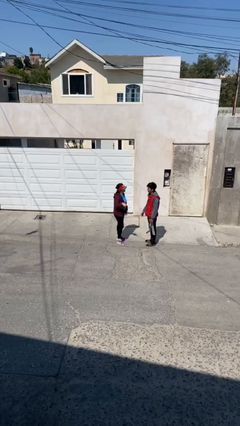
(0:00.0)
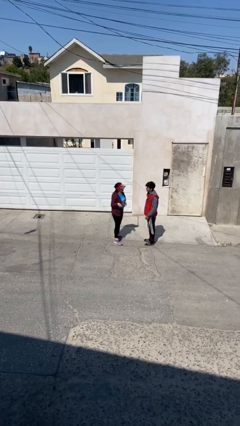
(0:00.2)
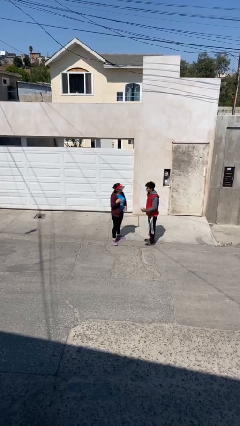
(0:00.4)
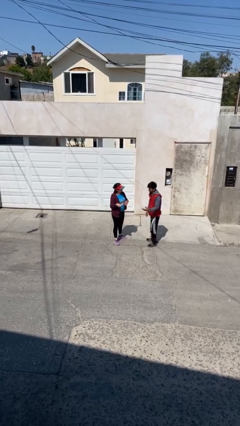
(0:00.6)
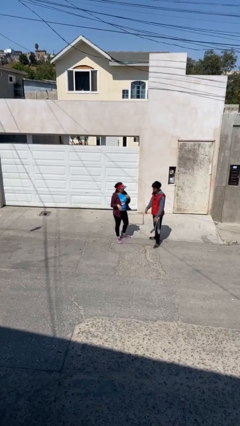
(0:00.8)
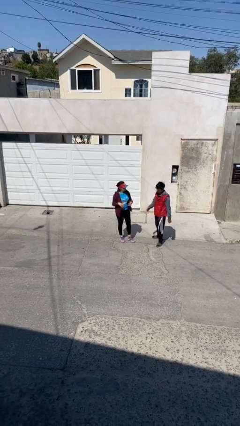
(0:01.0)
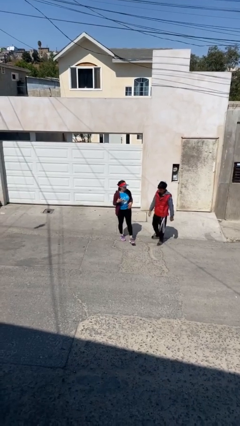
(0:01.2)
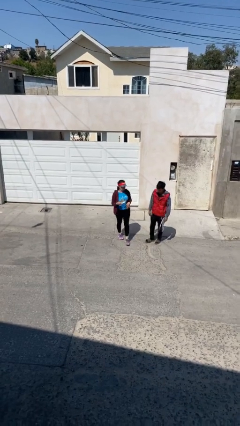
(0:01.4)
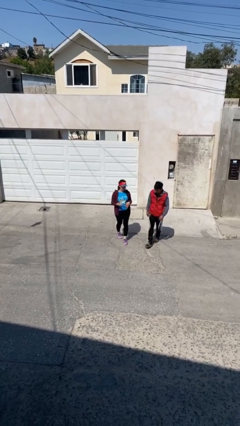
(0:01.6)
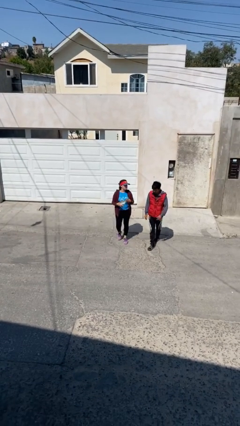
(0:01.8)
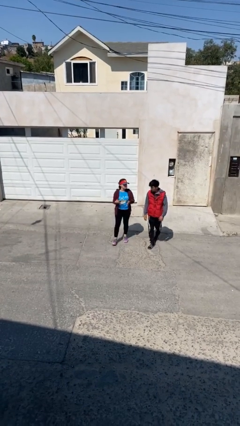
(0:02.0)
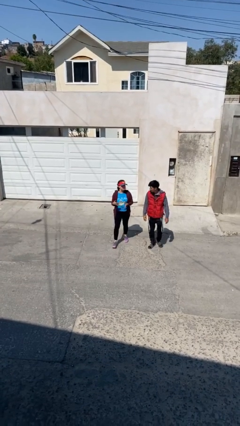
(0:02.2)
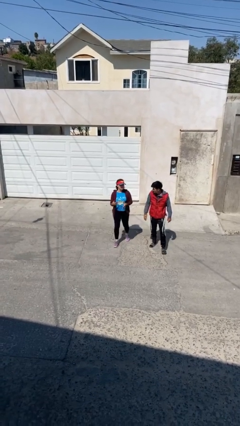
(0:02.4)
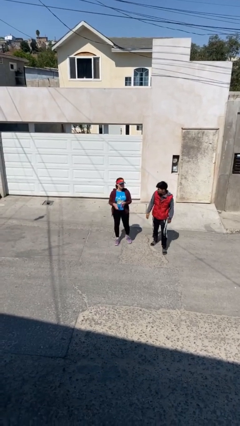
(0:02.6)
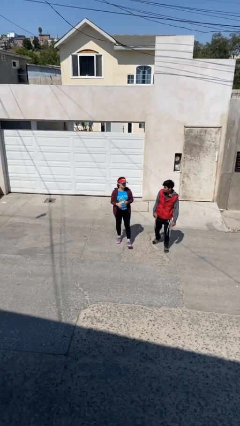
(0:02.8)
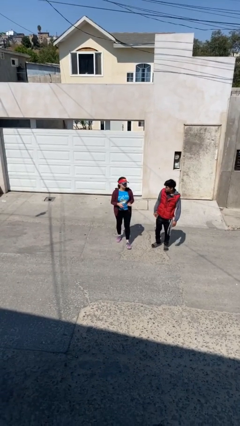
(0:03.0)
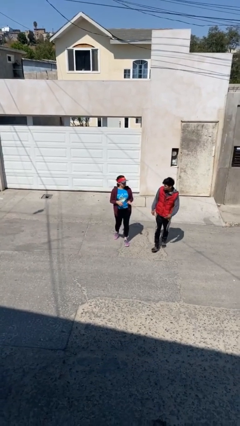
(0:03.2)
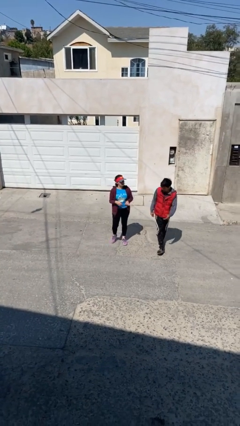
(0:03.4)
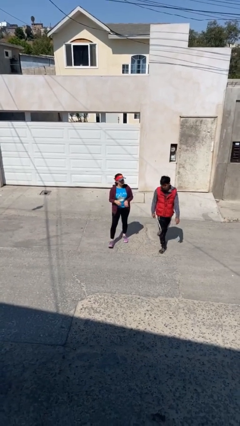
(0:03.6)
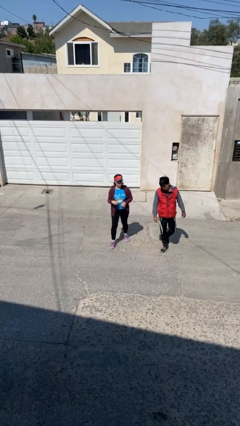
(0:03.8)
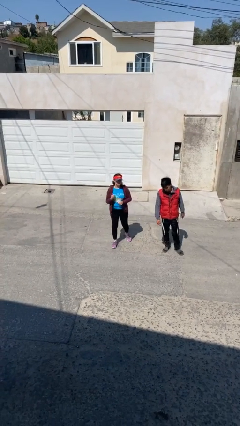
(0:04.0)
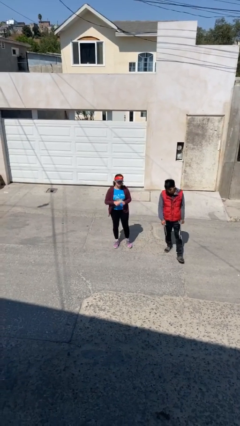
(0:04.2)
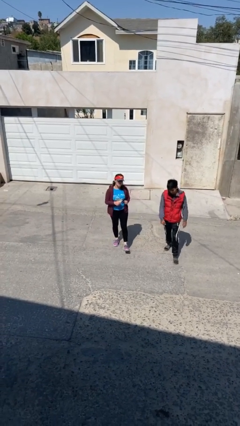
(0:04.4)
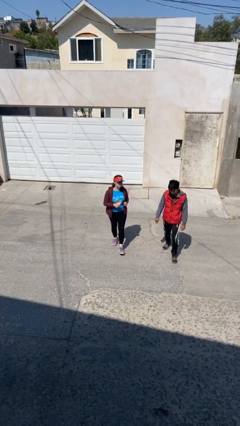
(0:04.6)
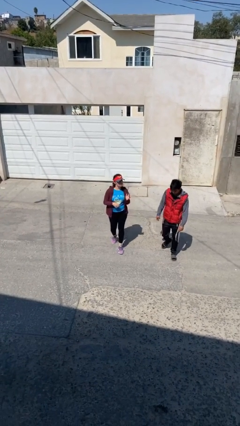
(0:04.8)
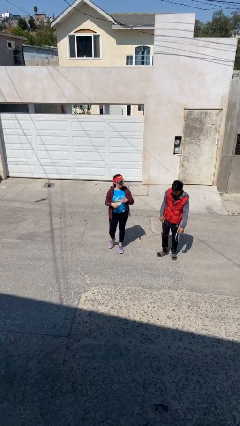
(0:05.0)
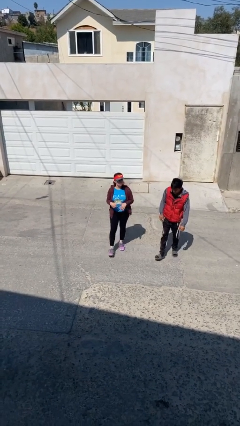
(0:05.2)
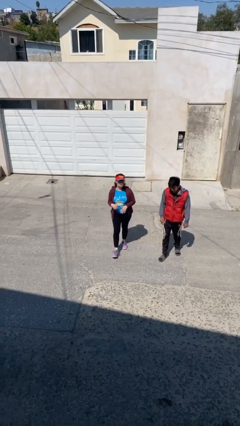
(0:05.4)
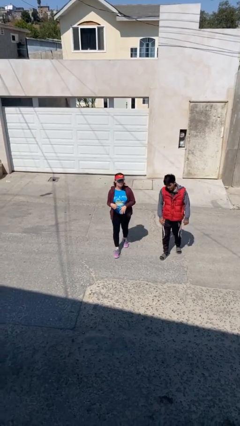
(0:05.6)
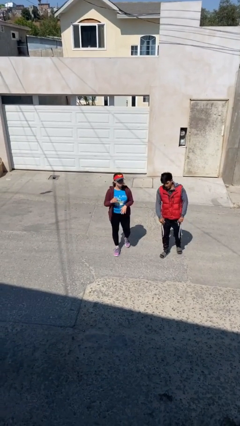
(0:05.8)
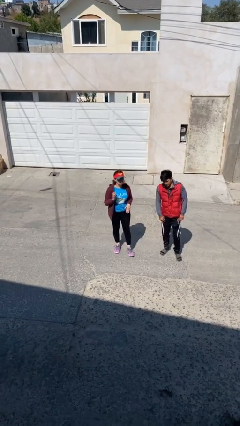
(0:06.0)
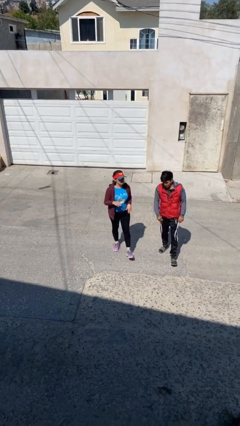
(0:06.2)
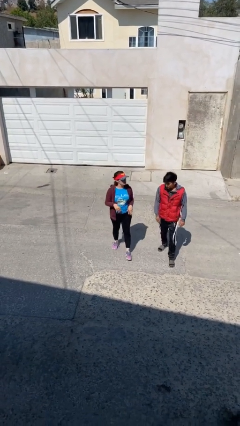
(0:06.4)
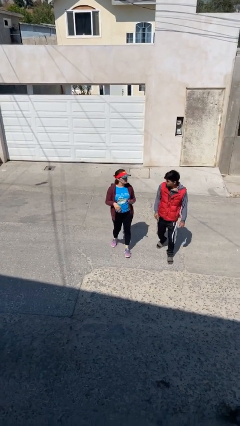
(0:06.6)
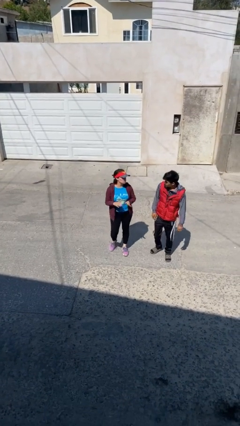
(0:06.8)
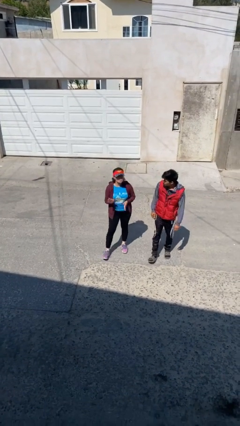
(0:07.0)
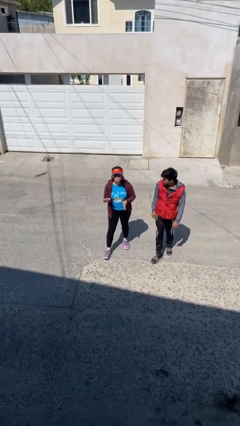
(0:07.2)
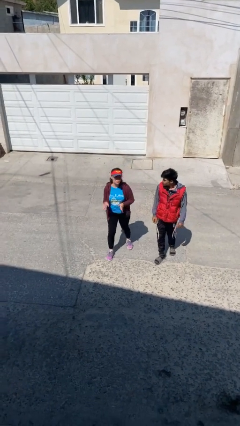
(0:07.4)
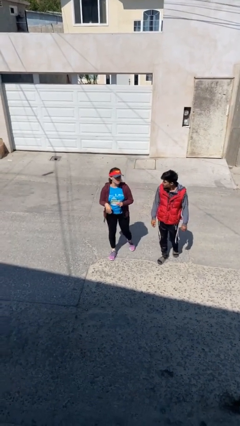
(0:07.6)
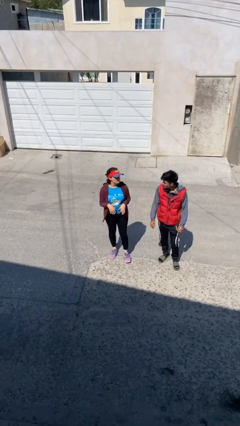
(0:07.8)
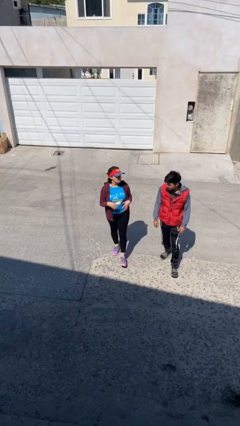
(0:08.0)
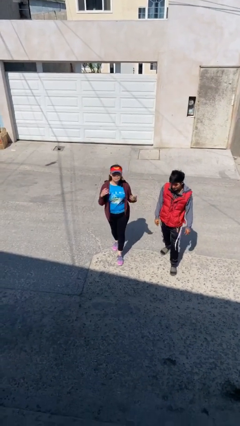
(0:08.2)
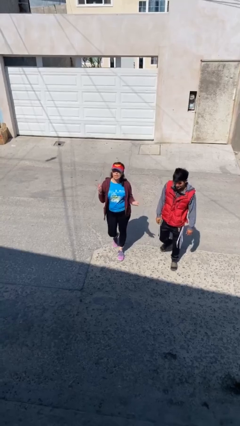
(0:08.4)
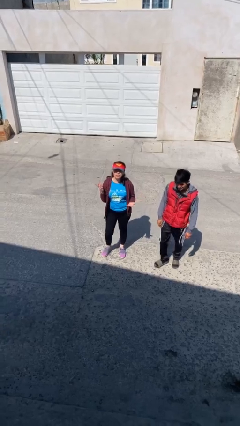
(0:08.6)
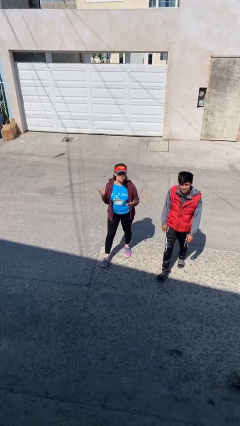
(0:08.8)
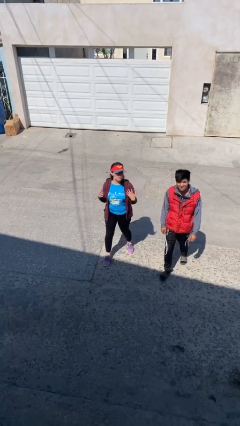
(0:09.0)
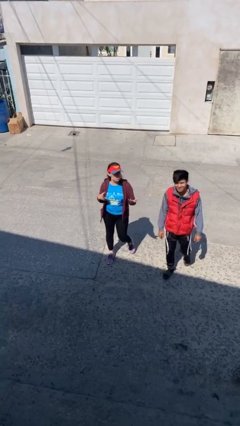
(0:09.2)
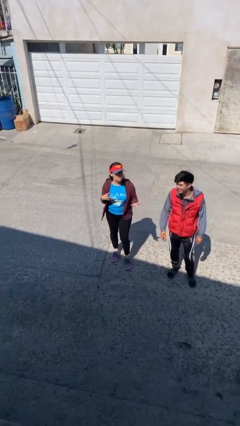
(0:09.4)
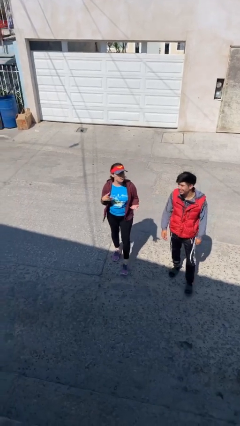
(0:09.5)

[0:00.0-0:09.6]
person talks to person

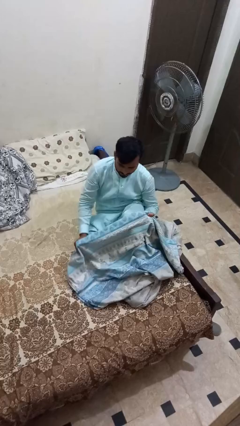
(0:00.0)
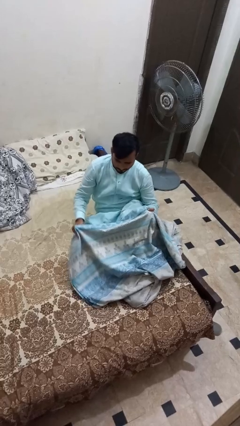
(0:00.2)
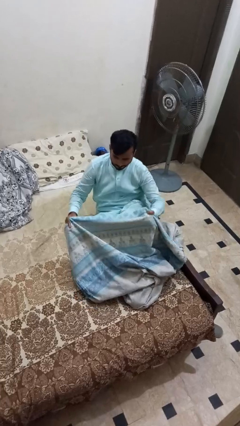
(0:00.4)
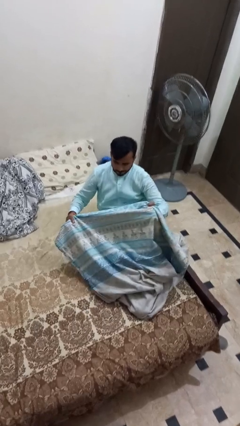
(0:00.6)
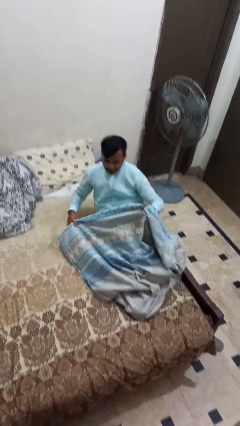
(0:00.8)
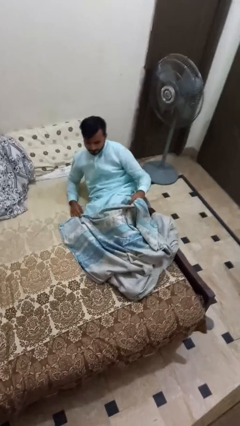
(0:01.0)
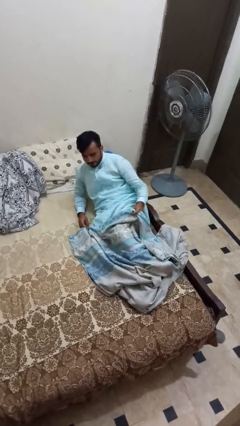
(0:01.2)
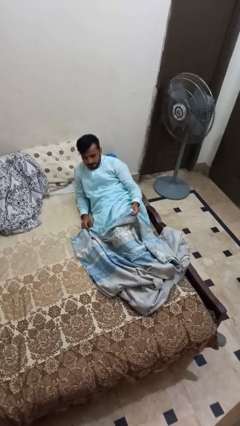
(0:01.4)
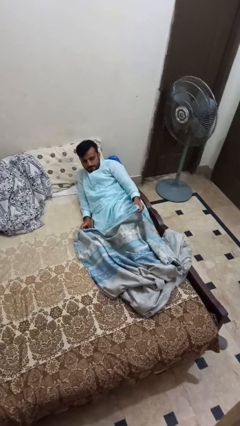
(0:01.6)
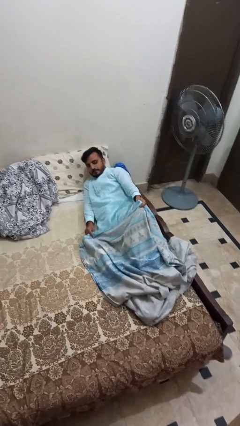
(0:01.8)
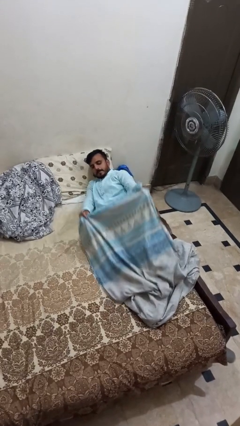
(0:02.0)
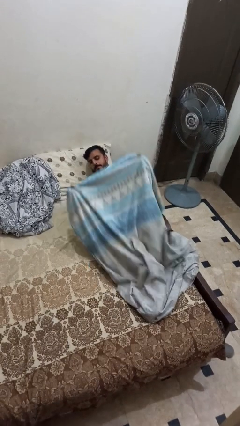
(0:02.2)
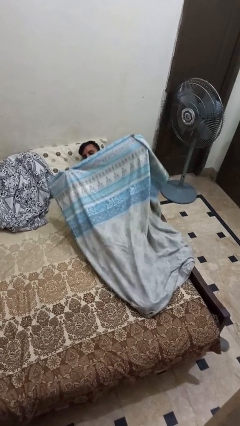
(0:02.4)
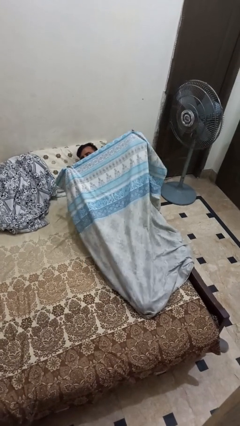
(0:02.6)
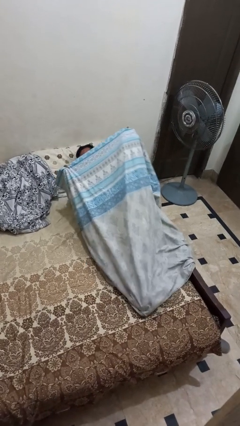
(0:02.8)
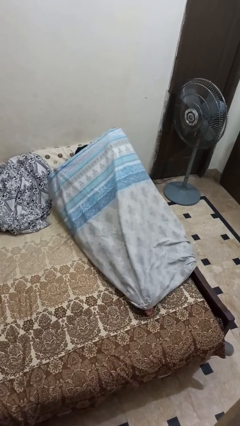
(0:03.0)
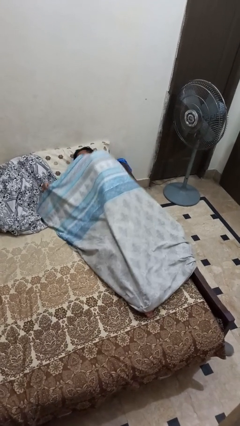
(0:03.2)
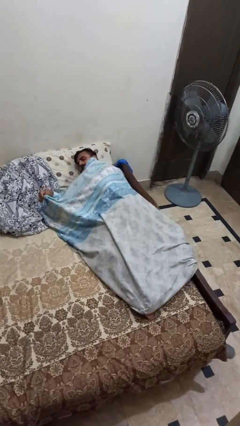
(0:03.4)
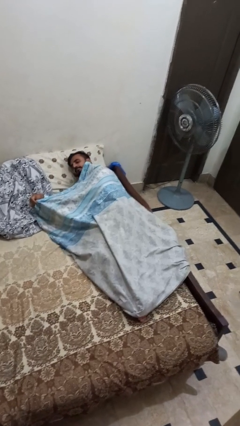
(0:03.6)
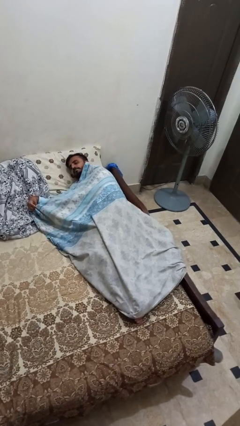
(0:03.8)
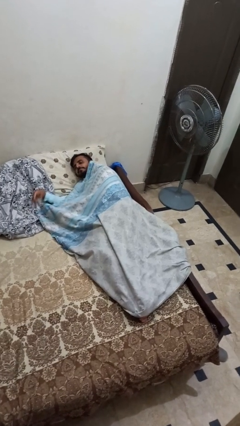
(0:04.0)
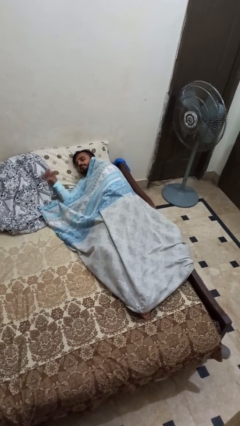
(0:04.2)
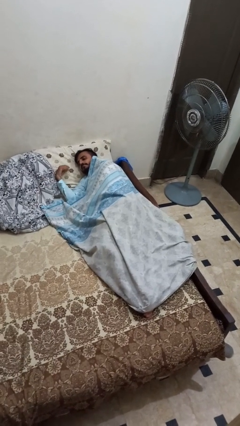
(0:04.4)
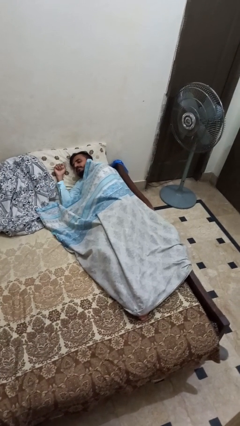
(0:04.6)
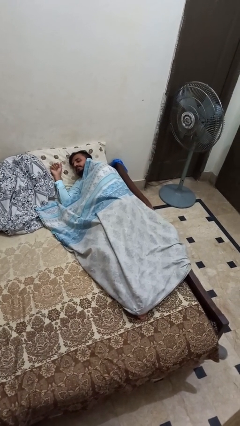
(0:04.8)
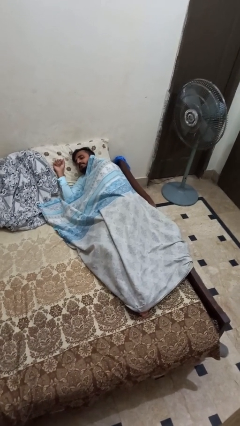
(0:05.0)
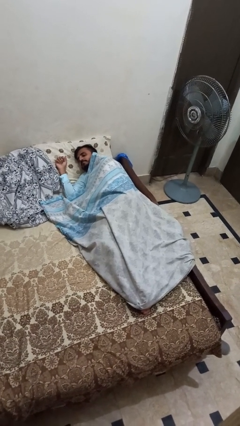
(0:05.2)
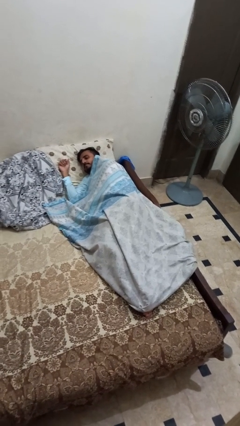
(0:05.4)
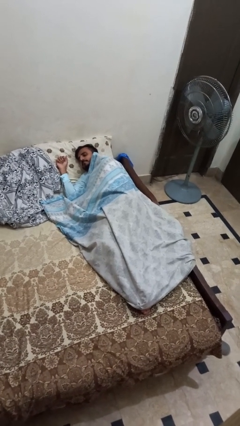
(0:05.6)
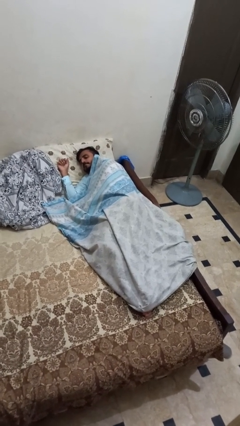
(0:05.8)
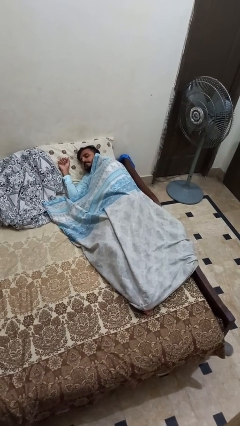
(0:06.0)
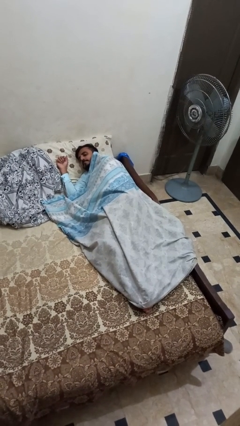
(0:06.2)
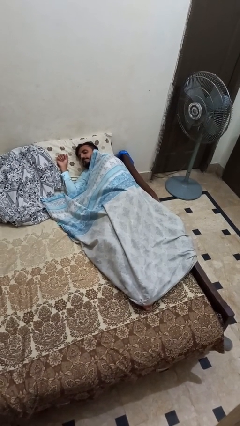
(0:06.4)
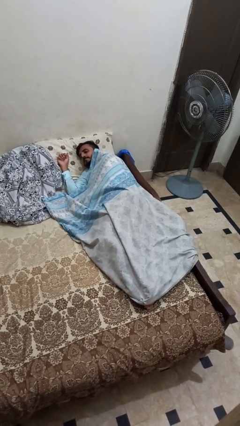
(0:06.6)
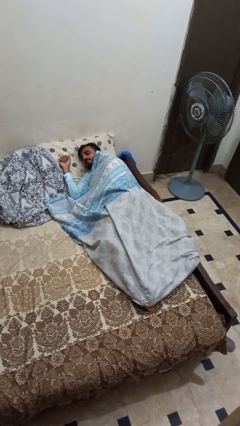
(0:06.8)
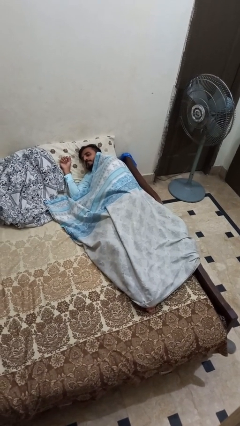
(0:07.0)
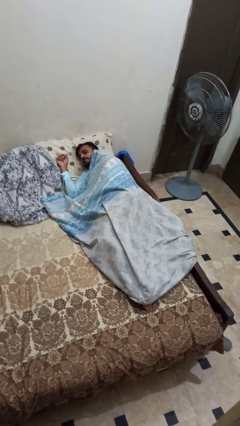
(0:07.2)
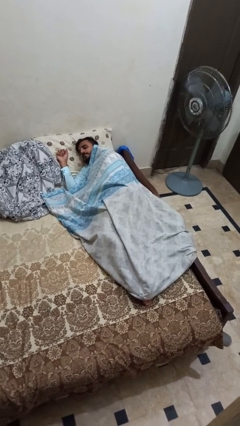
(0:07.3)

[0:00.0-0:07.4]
person covers with bedsheets

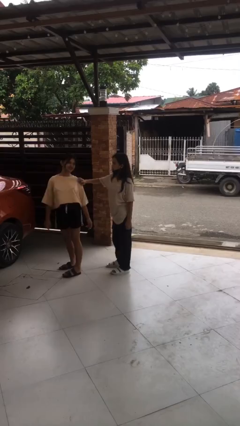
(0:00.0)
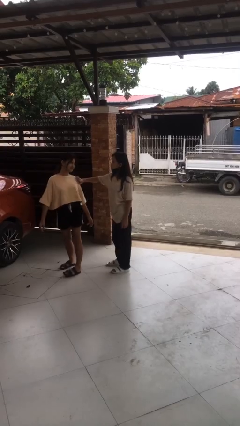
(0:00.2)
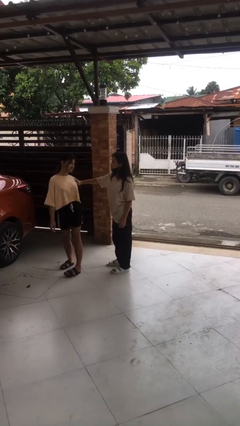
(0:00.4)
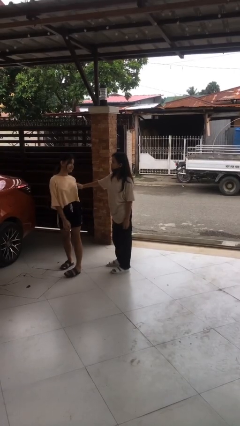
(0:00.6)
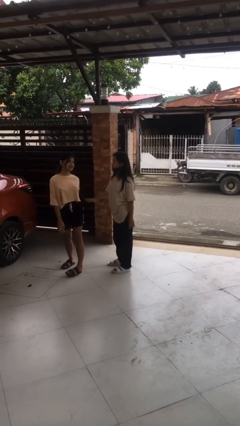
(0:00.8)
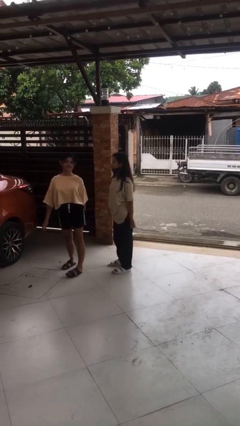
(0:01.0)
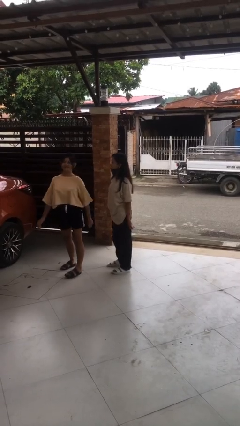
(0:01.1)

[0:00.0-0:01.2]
person spins person around
